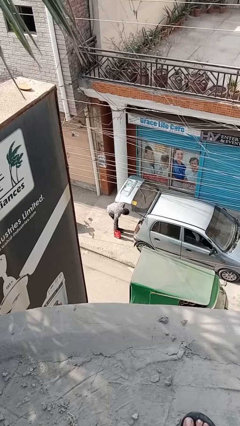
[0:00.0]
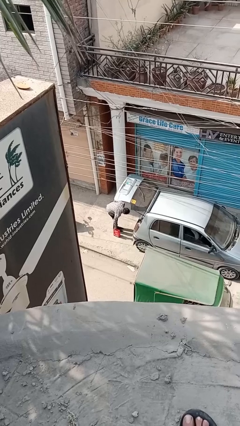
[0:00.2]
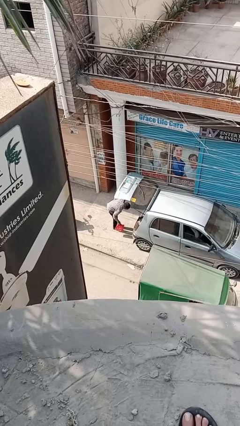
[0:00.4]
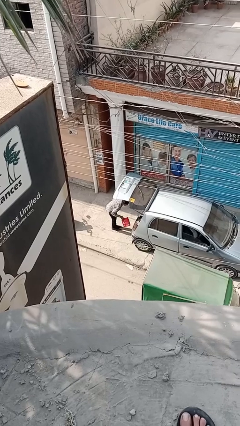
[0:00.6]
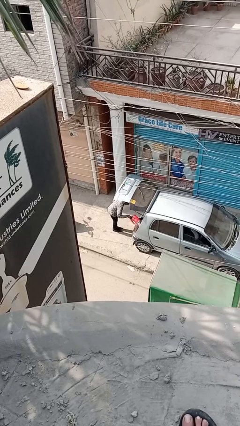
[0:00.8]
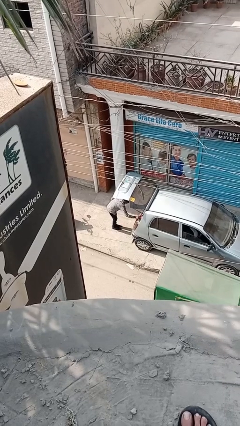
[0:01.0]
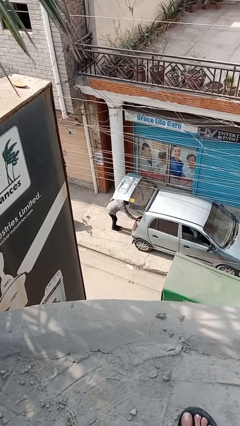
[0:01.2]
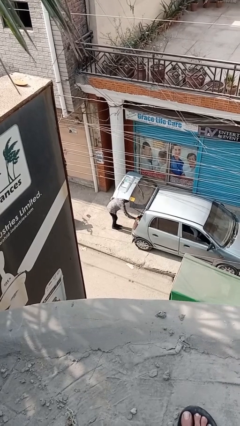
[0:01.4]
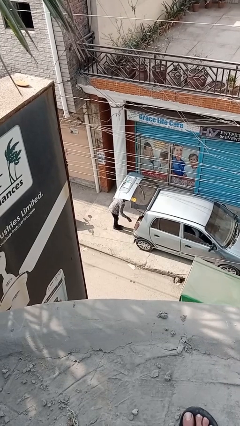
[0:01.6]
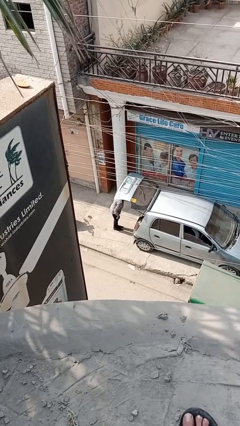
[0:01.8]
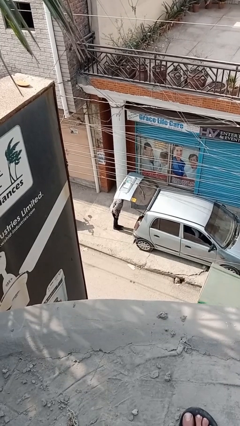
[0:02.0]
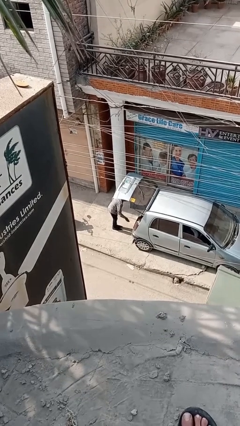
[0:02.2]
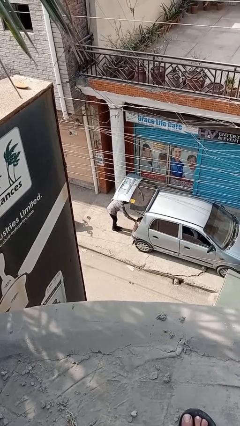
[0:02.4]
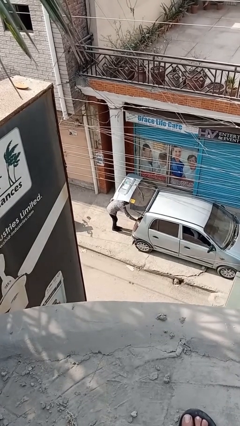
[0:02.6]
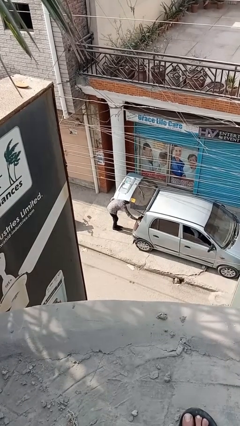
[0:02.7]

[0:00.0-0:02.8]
person loads car

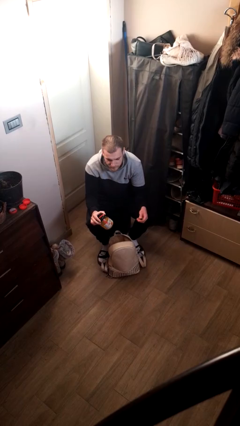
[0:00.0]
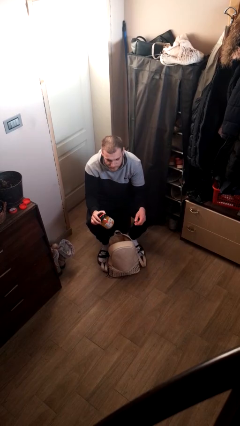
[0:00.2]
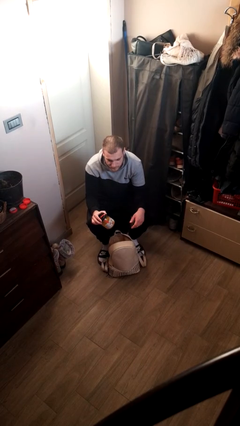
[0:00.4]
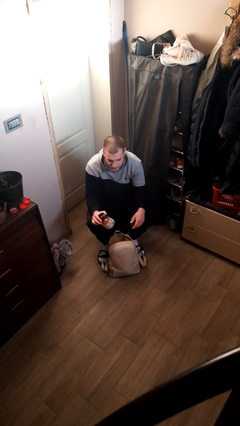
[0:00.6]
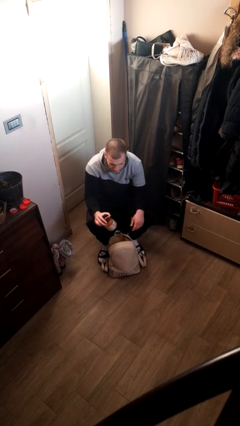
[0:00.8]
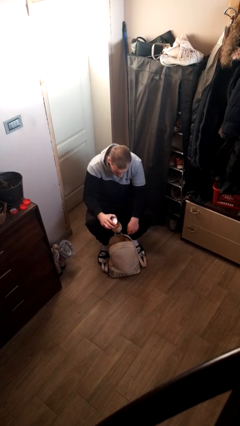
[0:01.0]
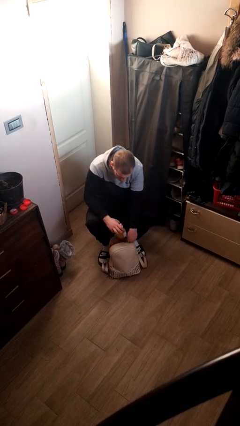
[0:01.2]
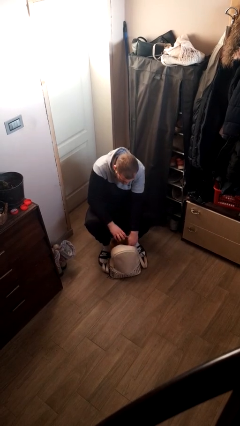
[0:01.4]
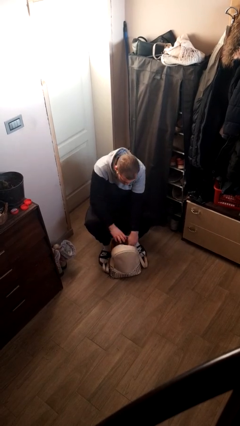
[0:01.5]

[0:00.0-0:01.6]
person takes object from backpack

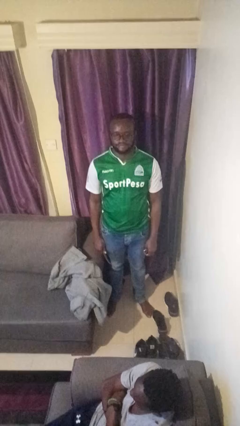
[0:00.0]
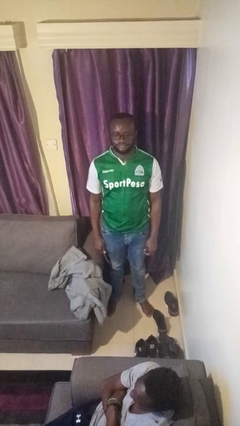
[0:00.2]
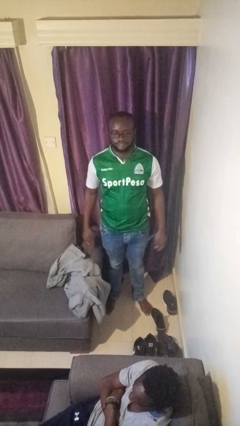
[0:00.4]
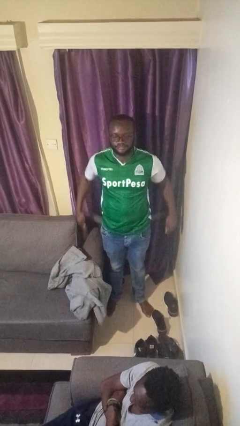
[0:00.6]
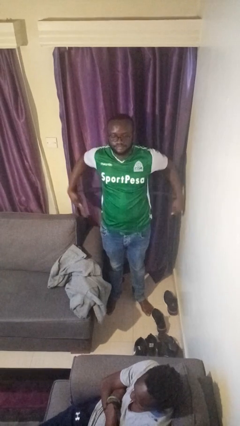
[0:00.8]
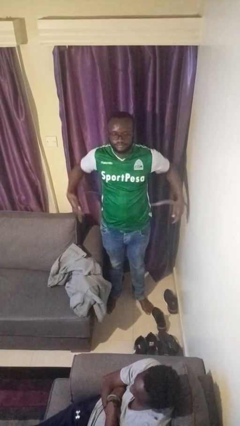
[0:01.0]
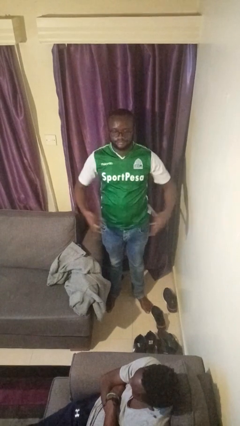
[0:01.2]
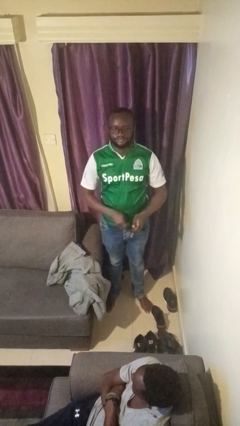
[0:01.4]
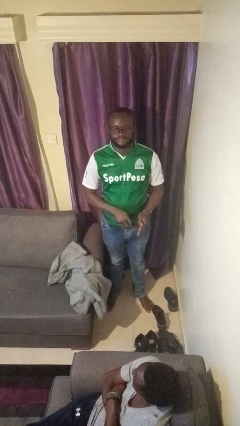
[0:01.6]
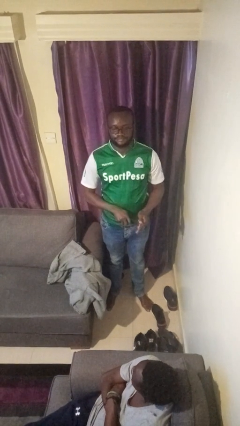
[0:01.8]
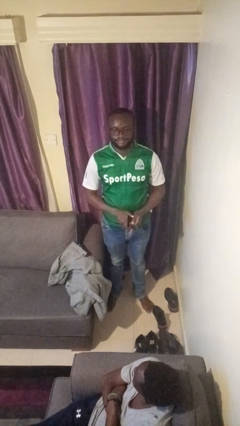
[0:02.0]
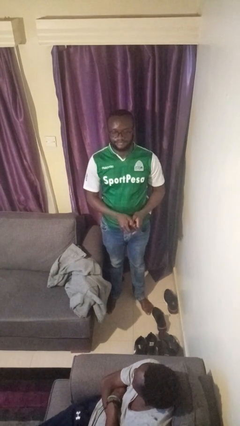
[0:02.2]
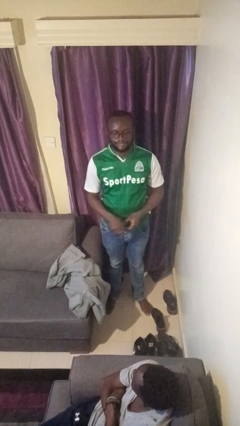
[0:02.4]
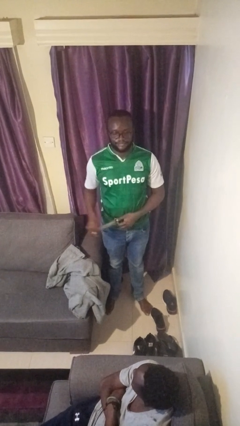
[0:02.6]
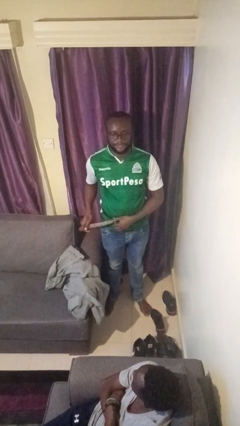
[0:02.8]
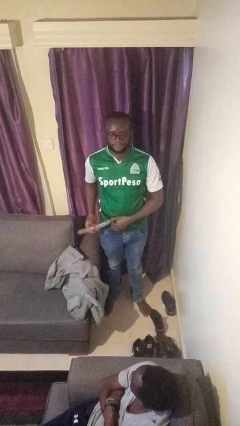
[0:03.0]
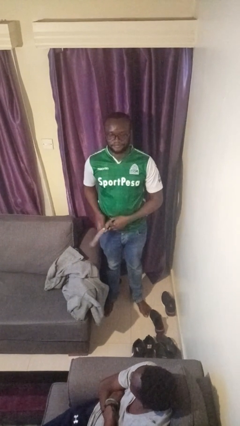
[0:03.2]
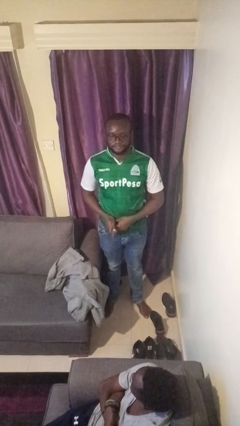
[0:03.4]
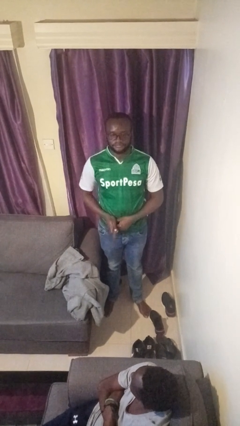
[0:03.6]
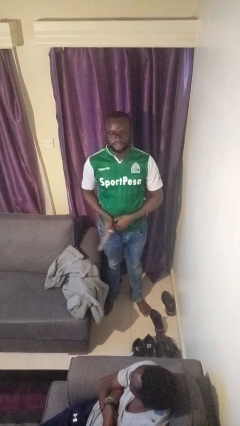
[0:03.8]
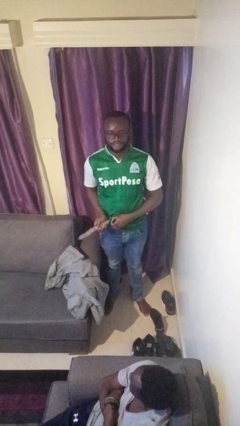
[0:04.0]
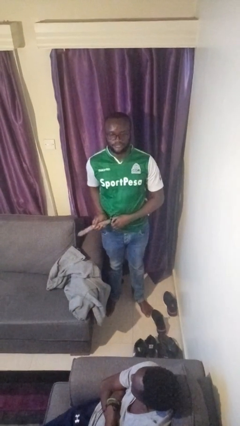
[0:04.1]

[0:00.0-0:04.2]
person puts on belt

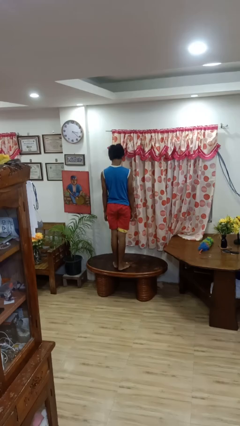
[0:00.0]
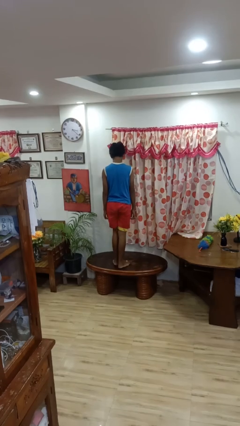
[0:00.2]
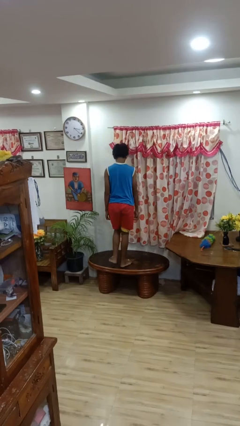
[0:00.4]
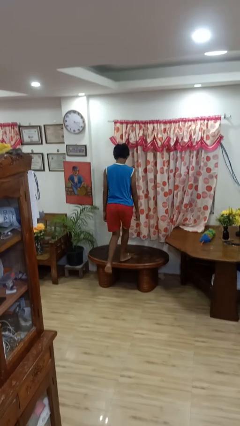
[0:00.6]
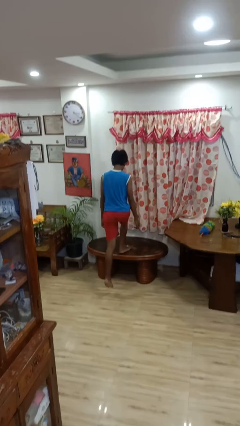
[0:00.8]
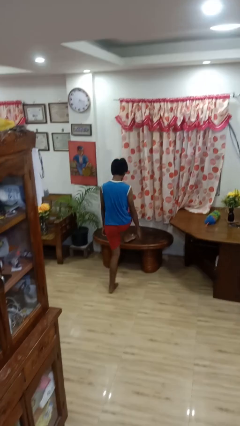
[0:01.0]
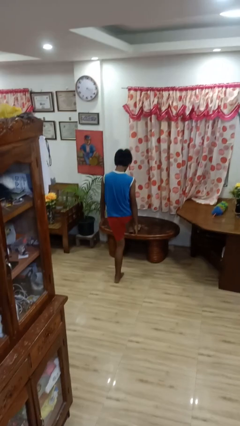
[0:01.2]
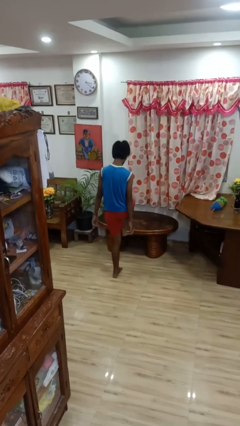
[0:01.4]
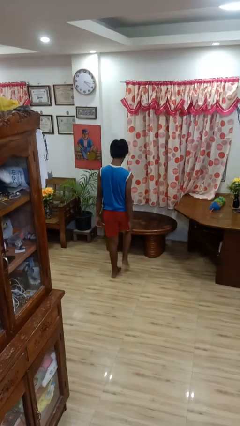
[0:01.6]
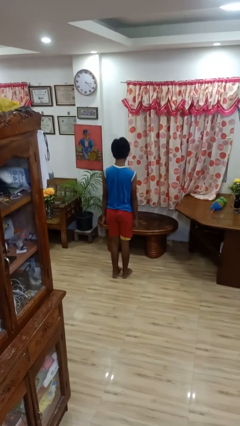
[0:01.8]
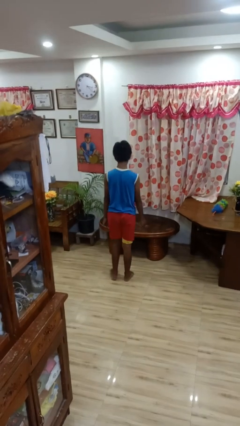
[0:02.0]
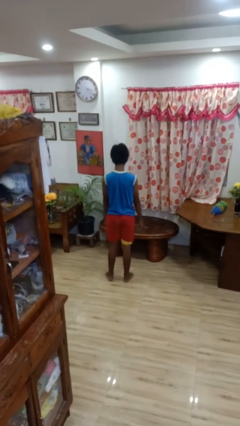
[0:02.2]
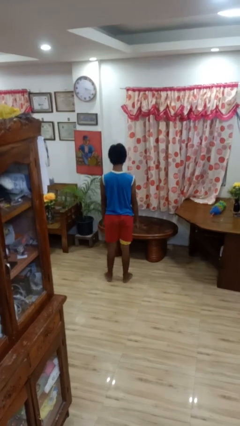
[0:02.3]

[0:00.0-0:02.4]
person climbs off table

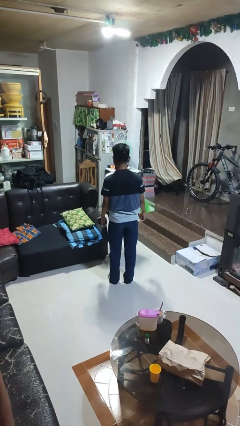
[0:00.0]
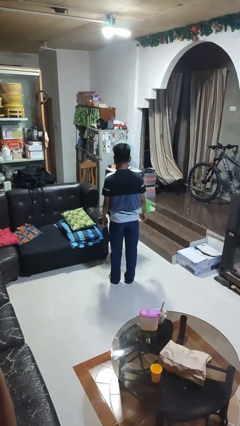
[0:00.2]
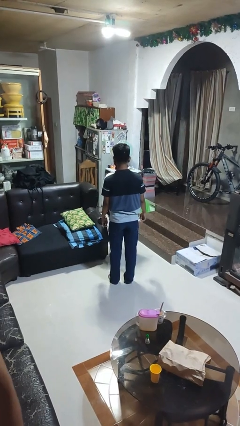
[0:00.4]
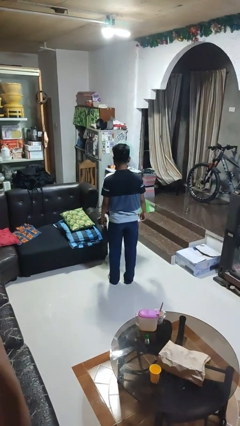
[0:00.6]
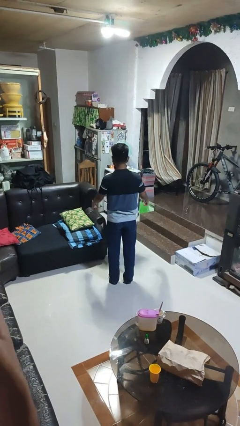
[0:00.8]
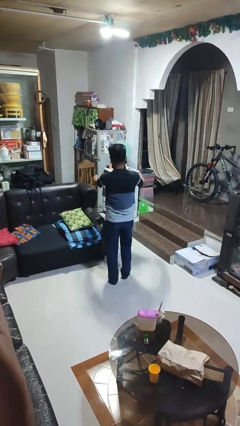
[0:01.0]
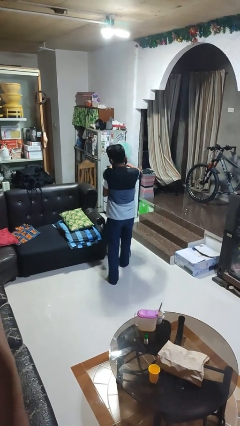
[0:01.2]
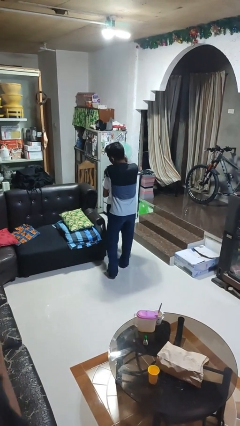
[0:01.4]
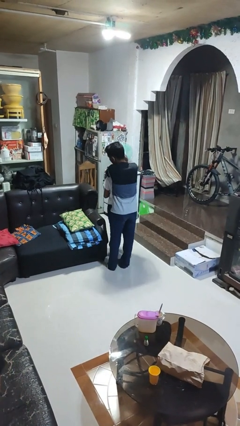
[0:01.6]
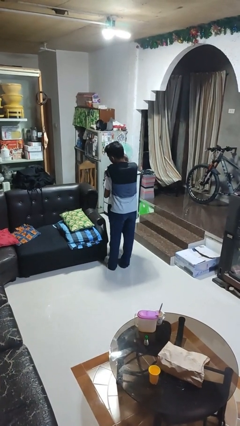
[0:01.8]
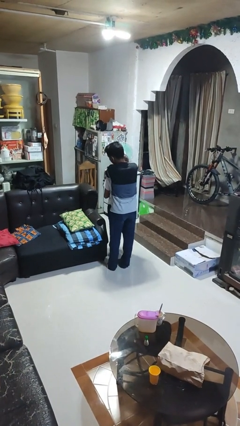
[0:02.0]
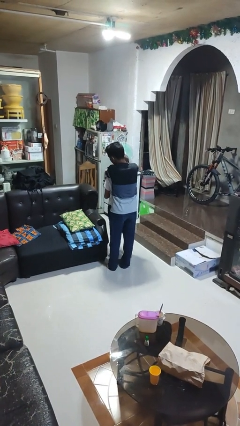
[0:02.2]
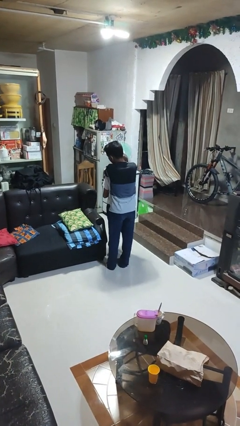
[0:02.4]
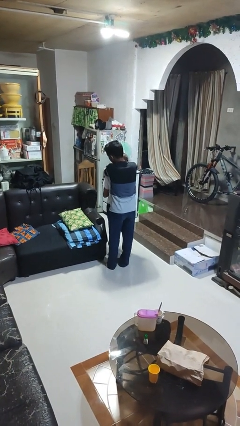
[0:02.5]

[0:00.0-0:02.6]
person hugs person from behind

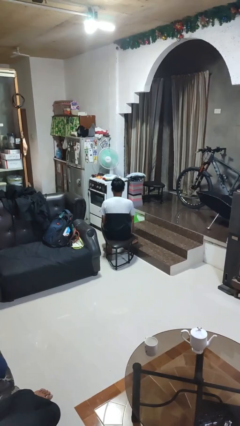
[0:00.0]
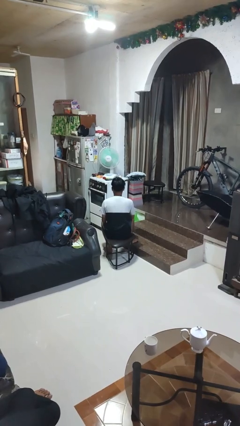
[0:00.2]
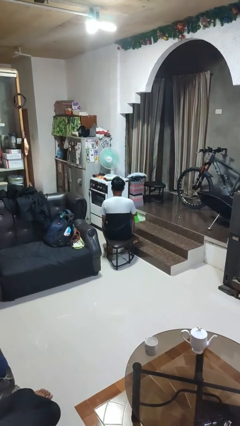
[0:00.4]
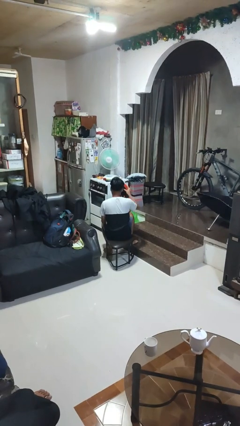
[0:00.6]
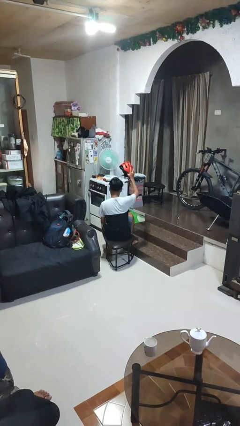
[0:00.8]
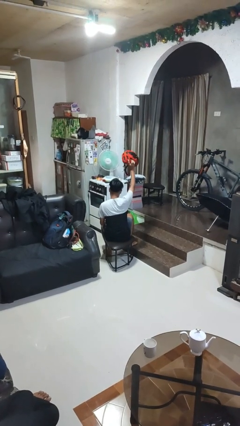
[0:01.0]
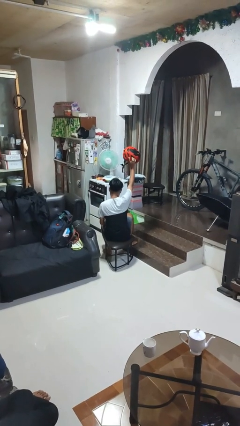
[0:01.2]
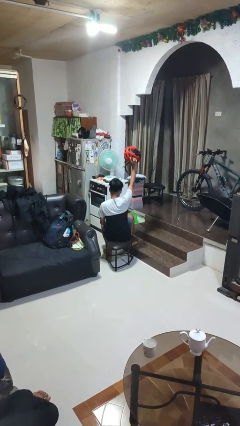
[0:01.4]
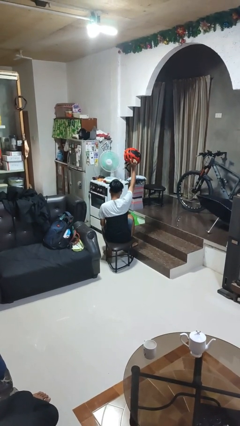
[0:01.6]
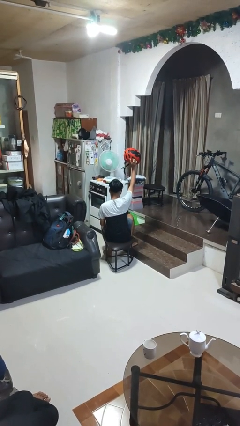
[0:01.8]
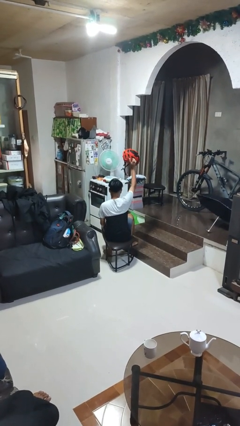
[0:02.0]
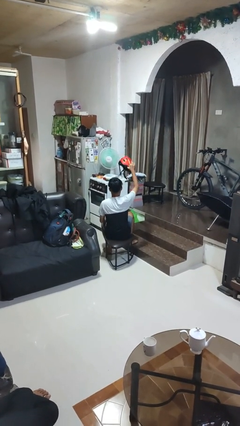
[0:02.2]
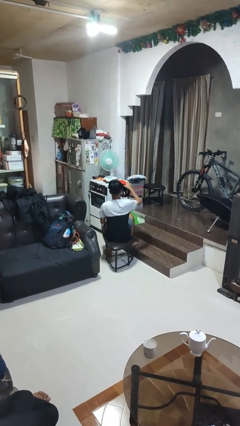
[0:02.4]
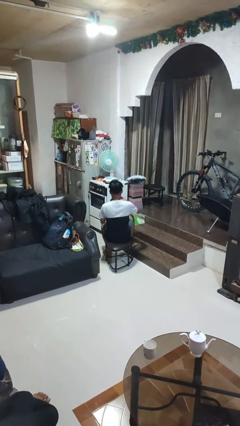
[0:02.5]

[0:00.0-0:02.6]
person holds object above head

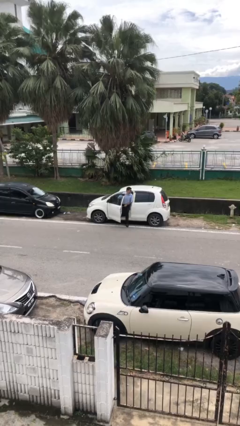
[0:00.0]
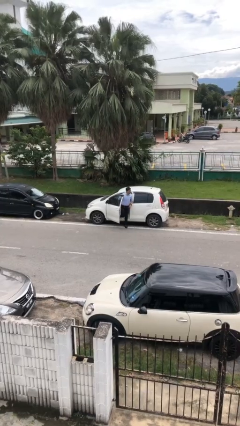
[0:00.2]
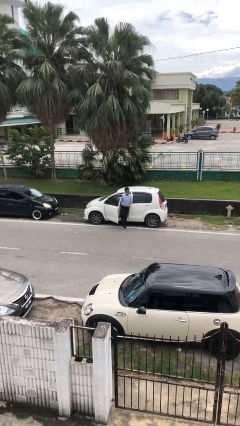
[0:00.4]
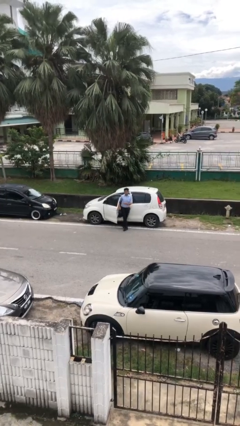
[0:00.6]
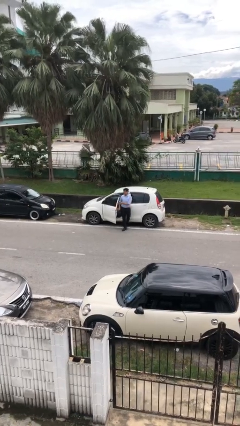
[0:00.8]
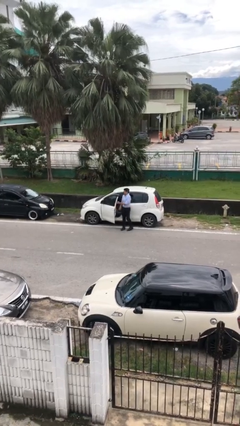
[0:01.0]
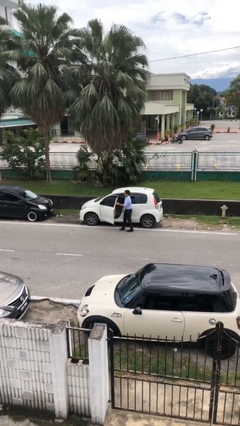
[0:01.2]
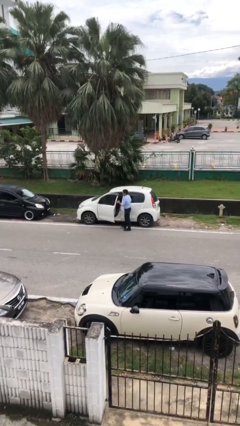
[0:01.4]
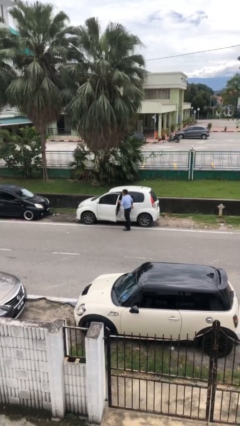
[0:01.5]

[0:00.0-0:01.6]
person exits car
